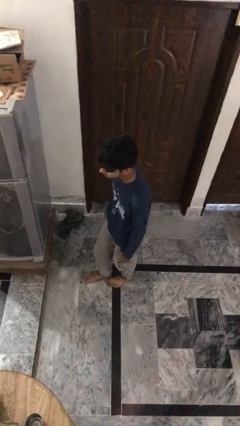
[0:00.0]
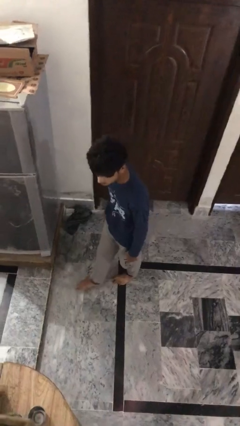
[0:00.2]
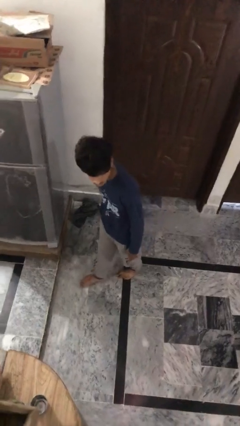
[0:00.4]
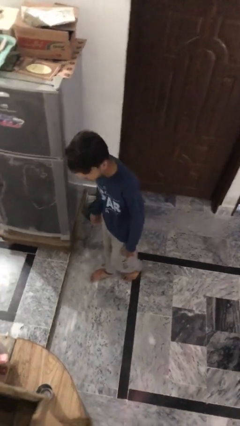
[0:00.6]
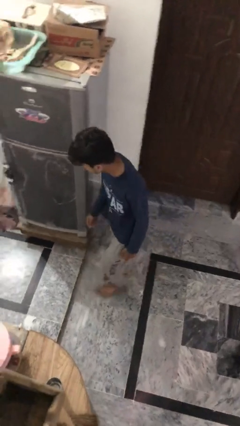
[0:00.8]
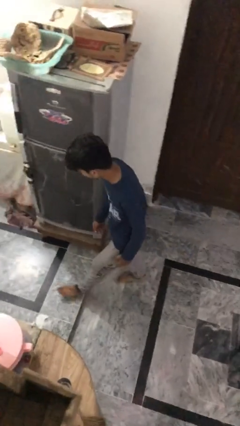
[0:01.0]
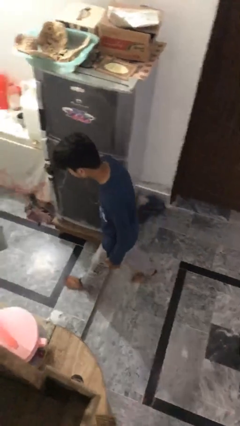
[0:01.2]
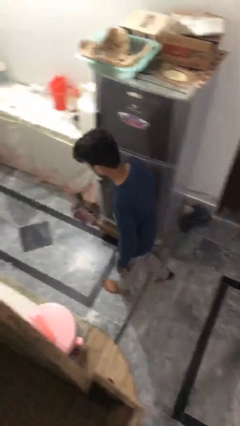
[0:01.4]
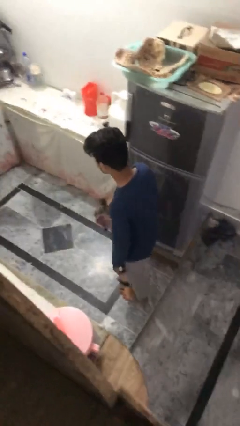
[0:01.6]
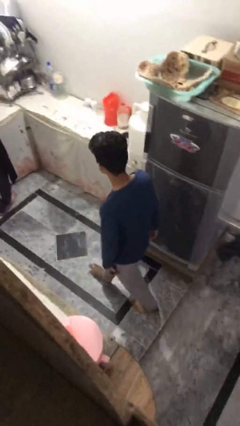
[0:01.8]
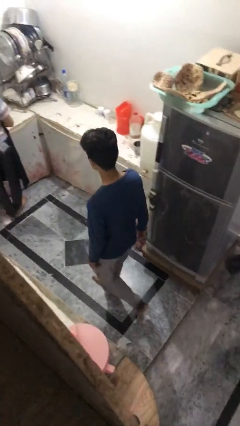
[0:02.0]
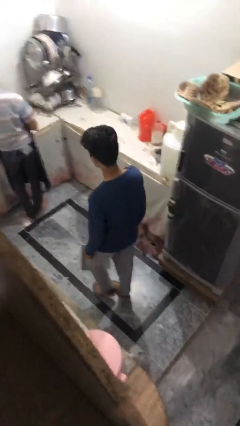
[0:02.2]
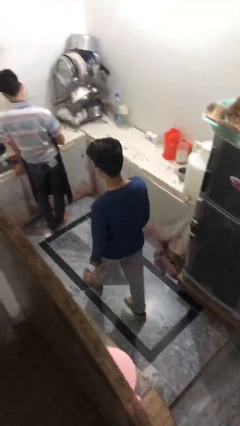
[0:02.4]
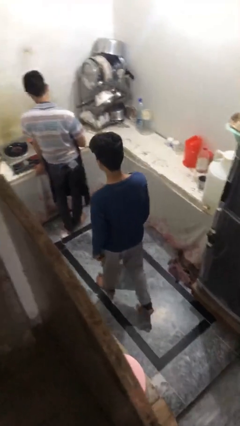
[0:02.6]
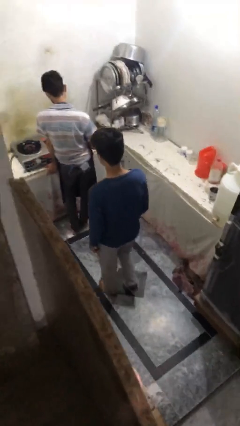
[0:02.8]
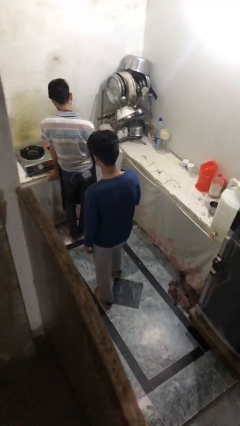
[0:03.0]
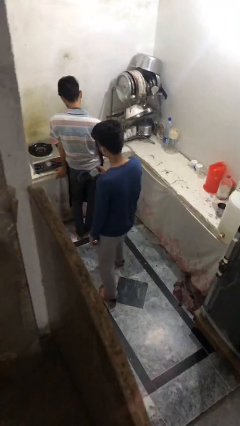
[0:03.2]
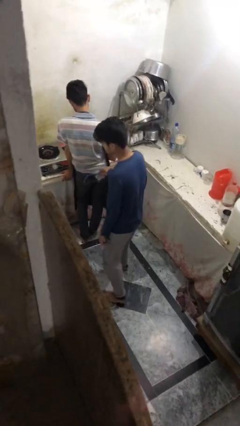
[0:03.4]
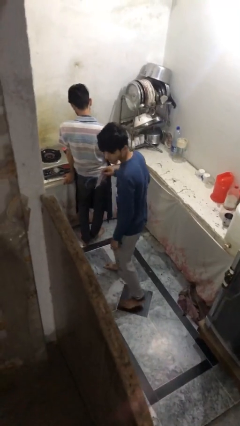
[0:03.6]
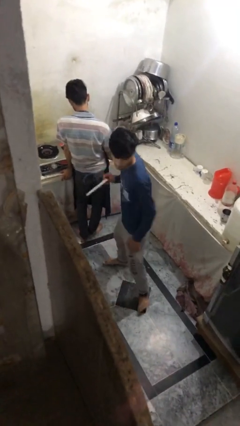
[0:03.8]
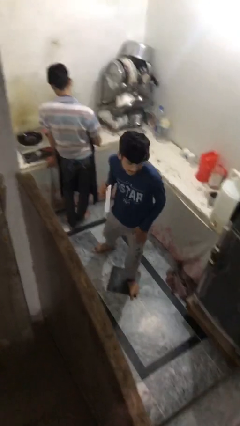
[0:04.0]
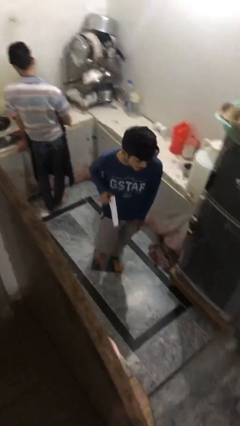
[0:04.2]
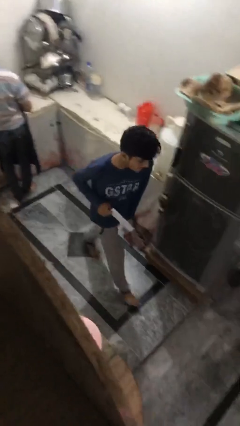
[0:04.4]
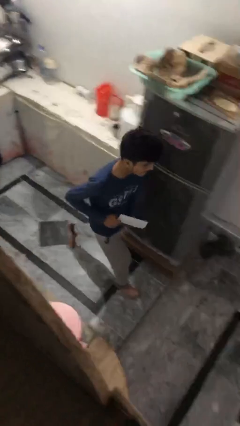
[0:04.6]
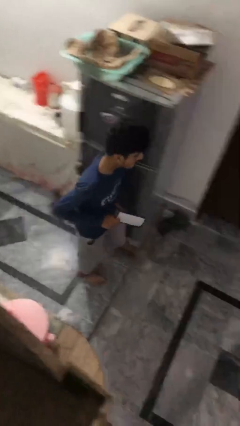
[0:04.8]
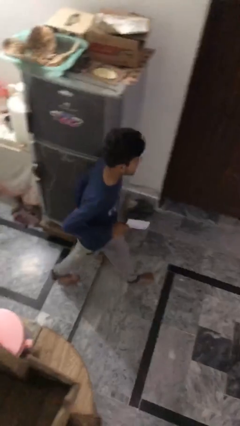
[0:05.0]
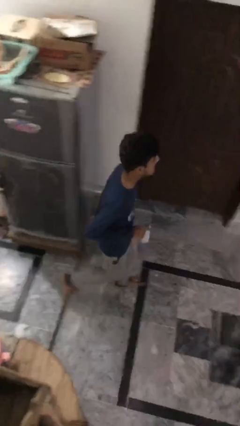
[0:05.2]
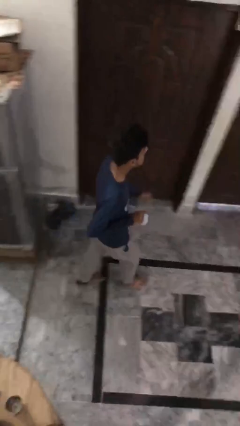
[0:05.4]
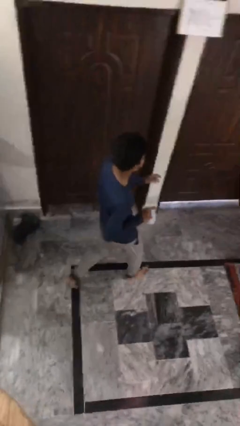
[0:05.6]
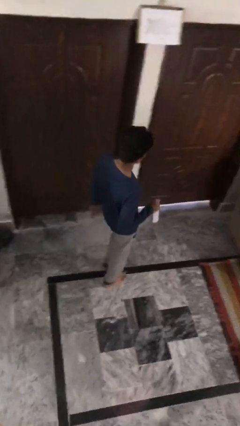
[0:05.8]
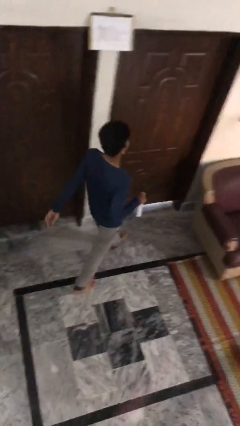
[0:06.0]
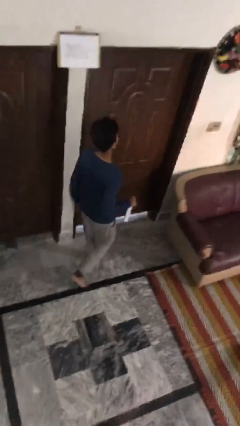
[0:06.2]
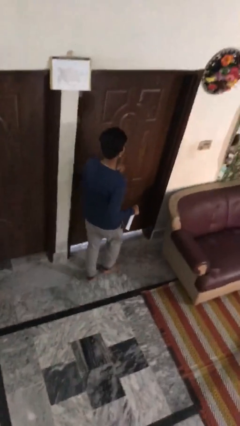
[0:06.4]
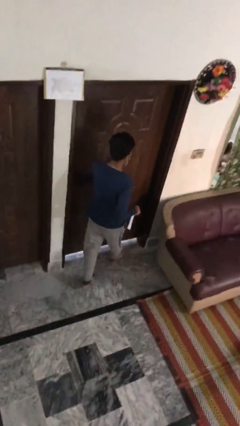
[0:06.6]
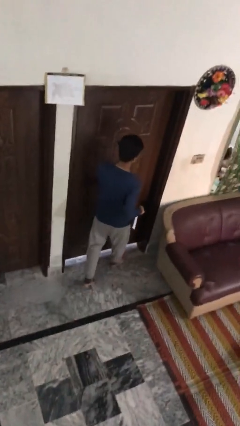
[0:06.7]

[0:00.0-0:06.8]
person steals object from person

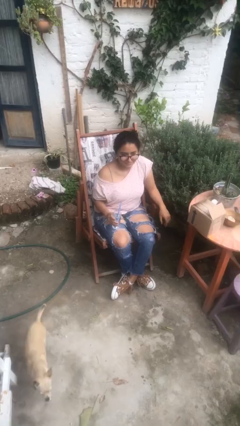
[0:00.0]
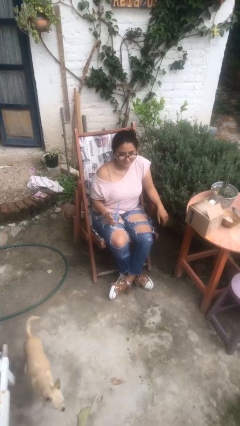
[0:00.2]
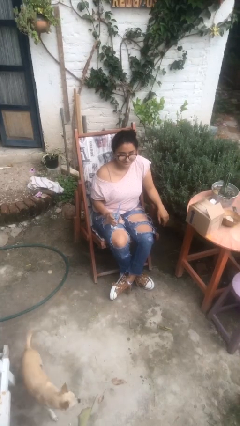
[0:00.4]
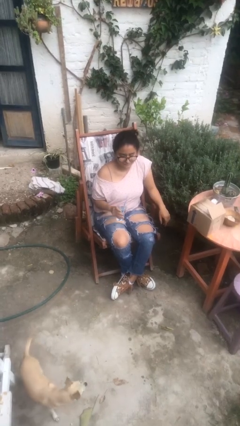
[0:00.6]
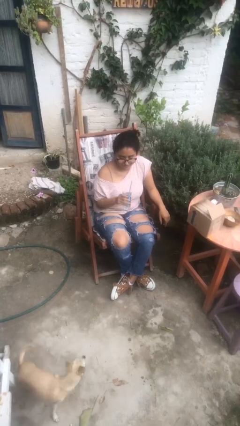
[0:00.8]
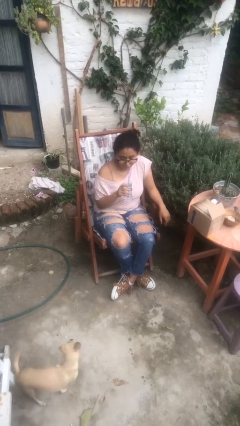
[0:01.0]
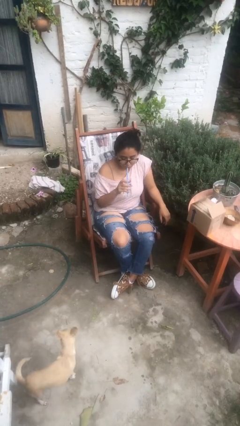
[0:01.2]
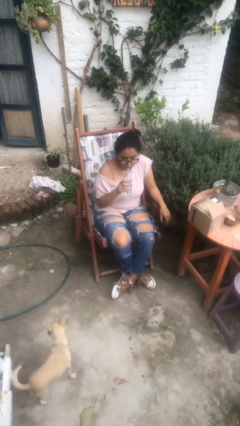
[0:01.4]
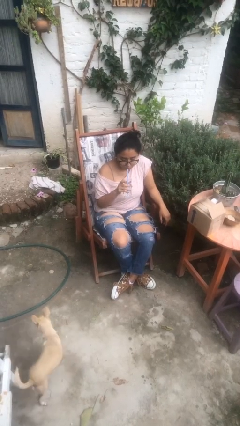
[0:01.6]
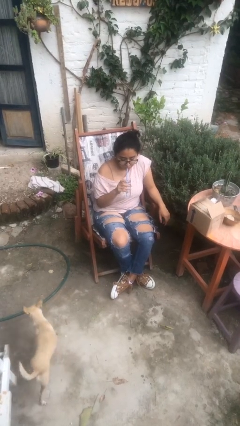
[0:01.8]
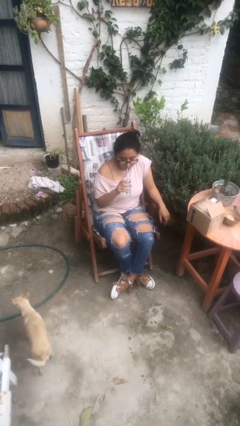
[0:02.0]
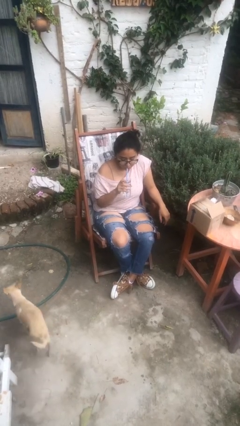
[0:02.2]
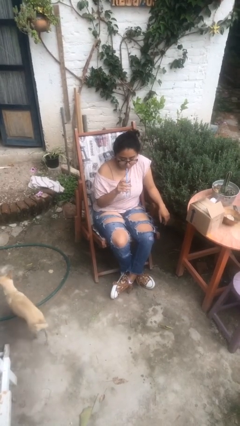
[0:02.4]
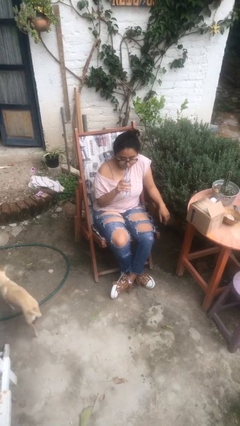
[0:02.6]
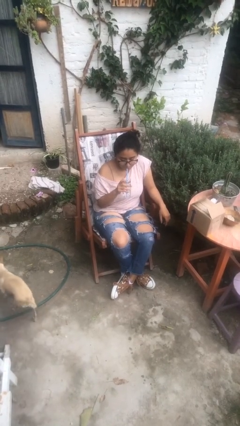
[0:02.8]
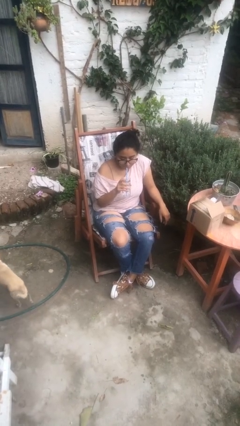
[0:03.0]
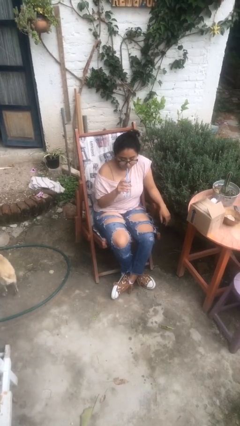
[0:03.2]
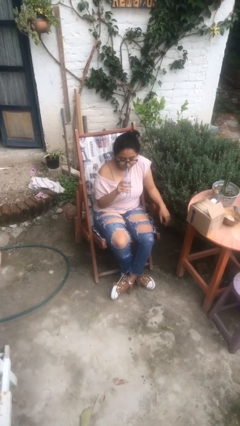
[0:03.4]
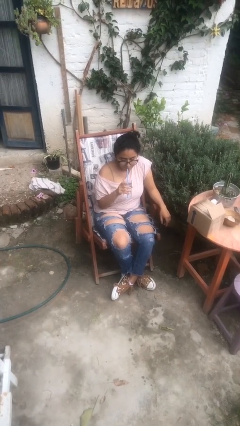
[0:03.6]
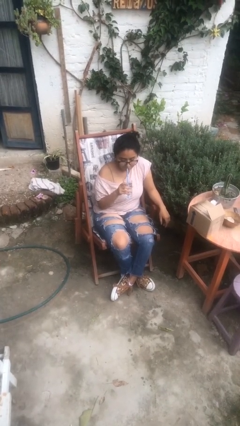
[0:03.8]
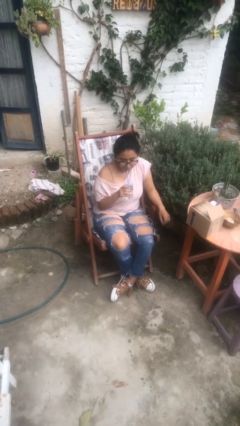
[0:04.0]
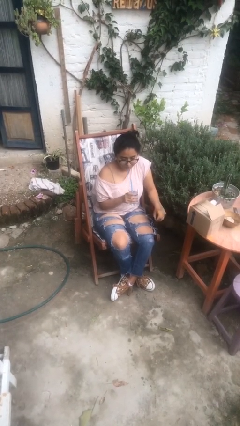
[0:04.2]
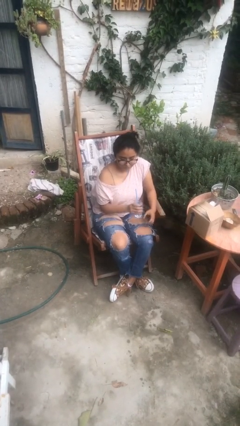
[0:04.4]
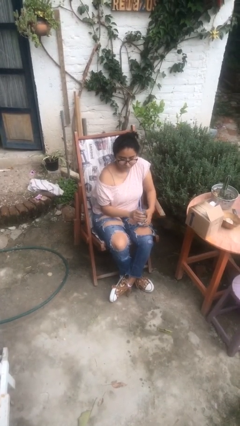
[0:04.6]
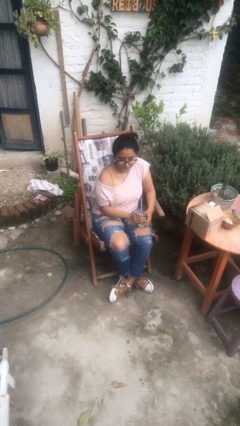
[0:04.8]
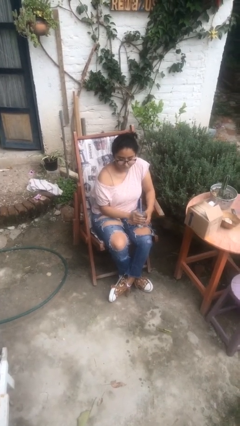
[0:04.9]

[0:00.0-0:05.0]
person drinks from straw

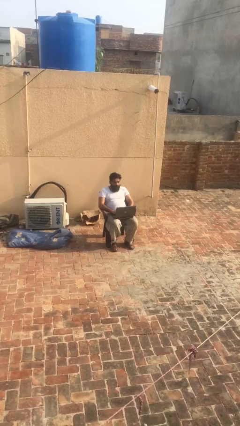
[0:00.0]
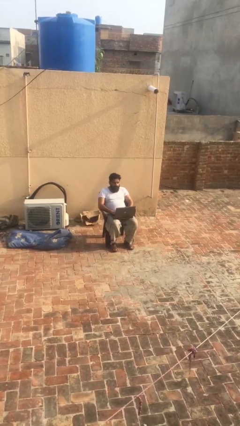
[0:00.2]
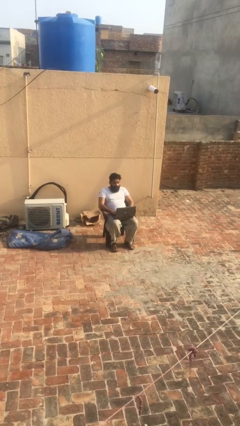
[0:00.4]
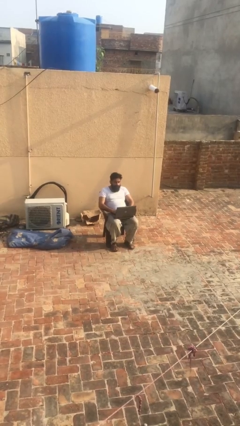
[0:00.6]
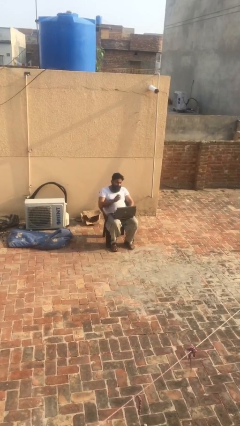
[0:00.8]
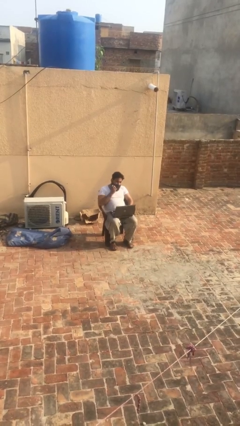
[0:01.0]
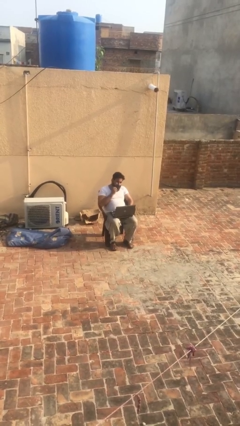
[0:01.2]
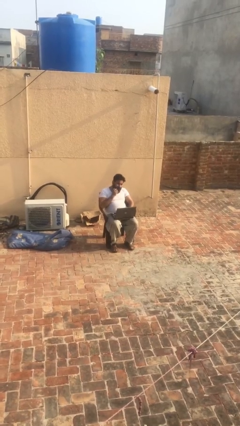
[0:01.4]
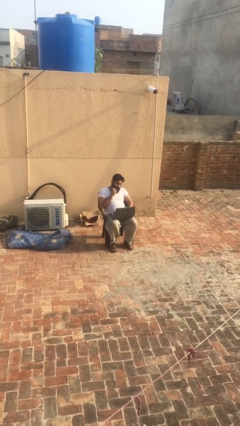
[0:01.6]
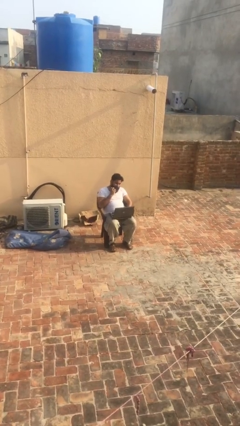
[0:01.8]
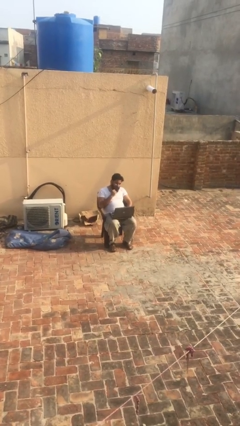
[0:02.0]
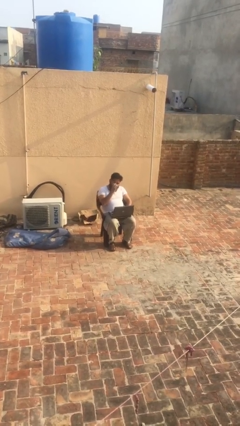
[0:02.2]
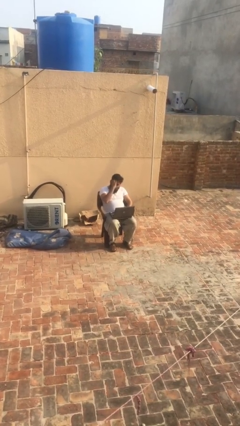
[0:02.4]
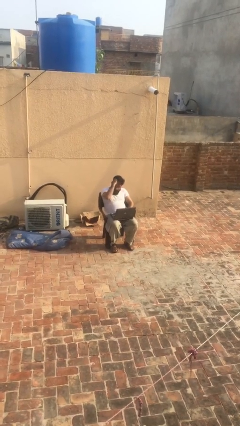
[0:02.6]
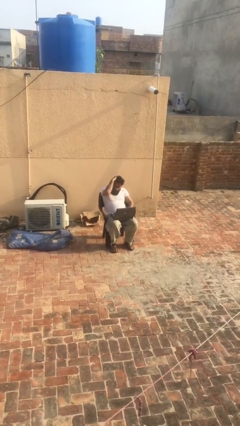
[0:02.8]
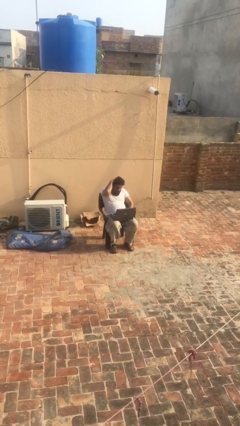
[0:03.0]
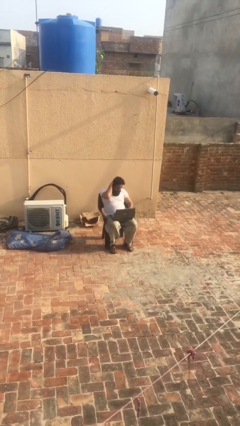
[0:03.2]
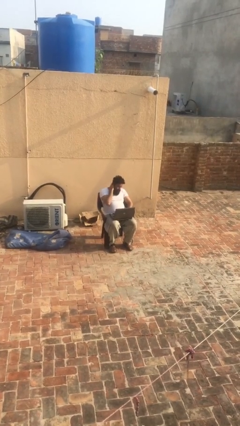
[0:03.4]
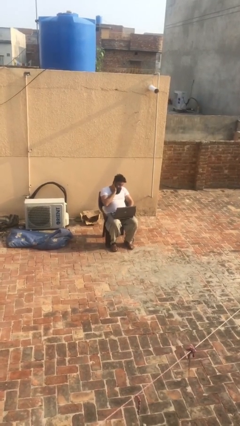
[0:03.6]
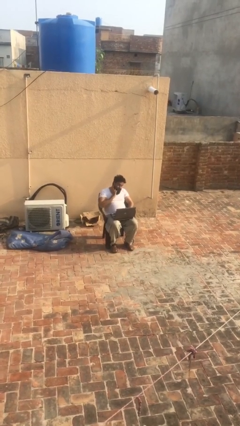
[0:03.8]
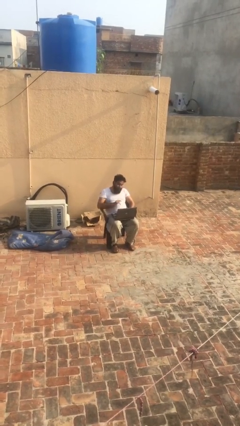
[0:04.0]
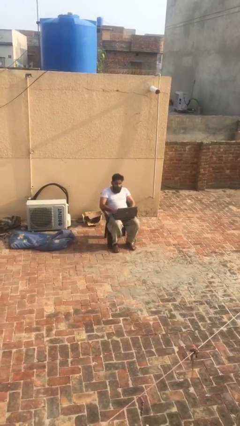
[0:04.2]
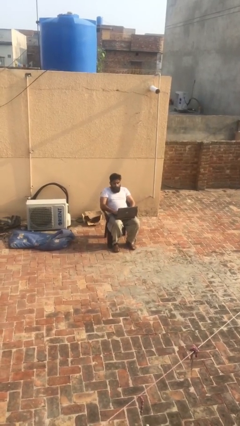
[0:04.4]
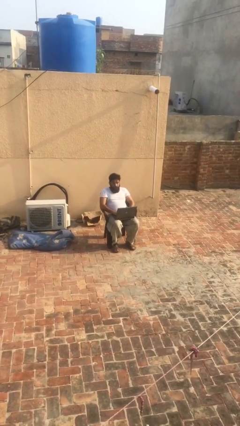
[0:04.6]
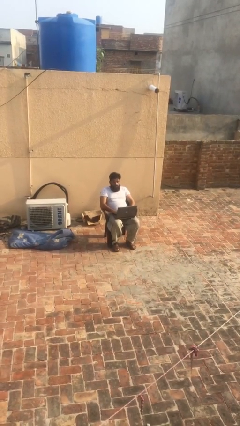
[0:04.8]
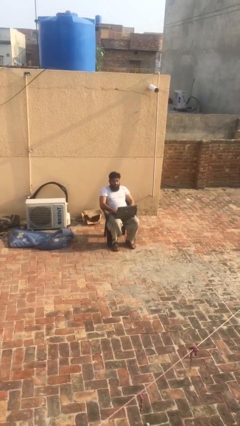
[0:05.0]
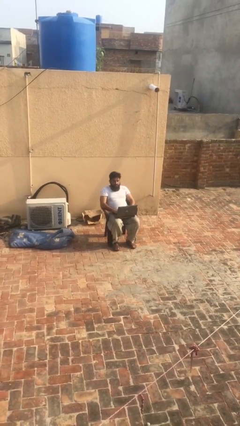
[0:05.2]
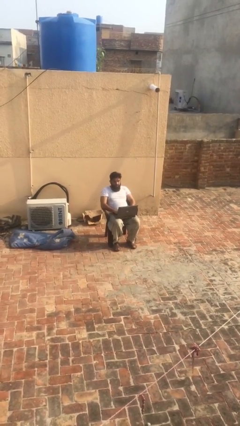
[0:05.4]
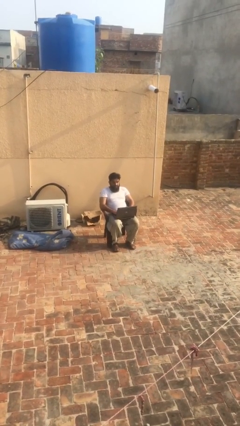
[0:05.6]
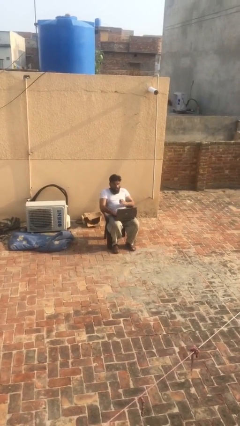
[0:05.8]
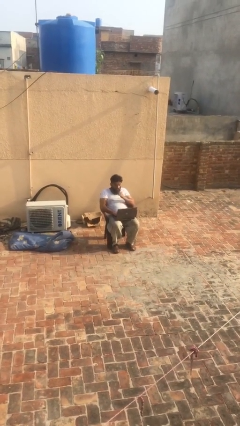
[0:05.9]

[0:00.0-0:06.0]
person interacts with laptop
